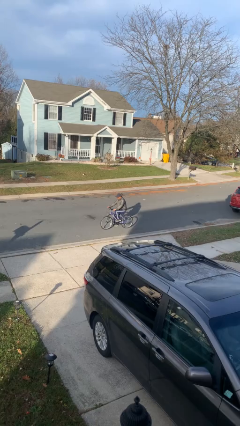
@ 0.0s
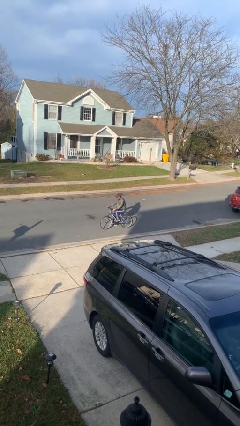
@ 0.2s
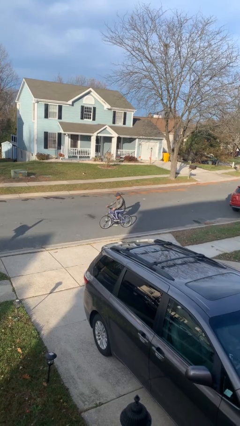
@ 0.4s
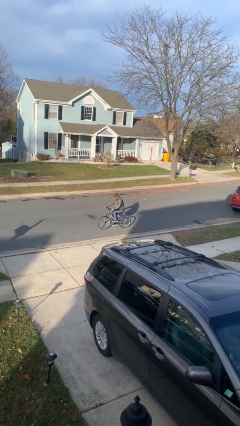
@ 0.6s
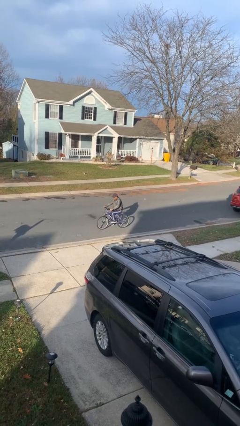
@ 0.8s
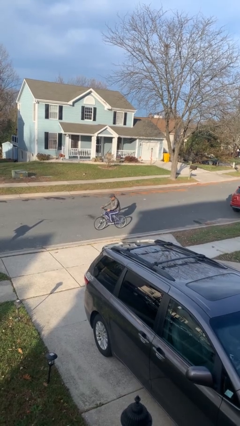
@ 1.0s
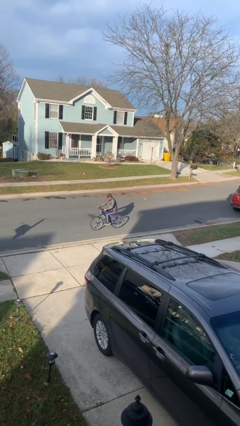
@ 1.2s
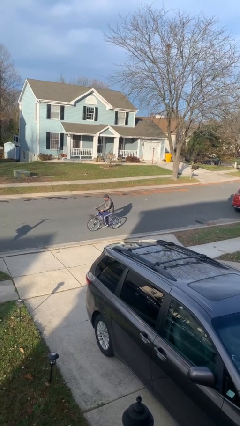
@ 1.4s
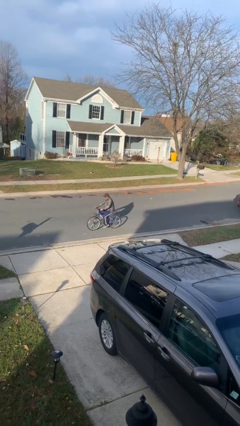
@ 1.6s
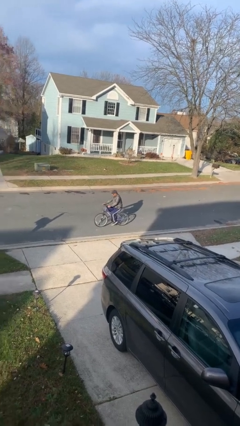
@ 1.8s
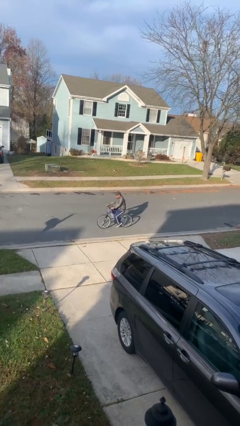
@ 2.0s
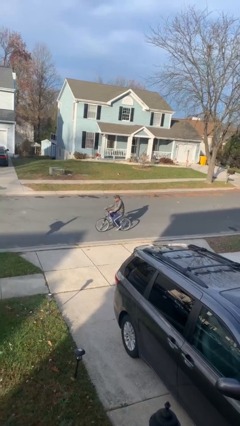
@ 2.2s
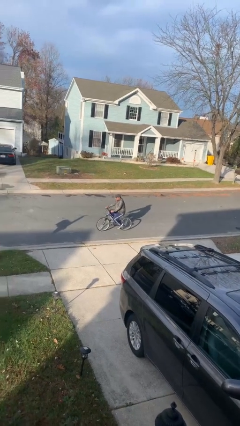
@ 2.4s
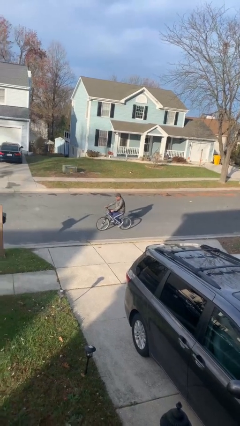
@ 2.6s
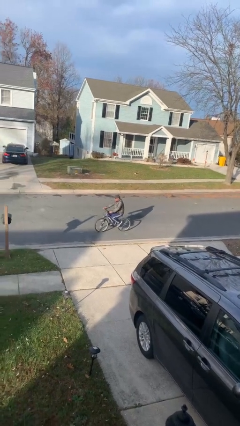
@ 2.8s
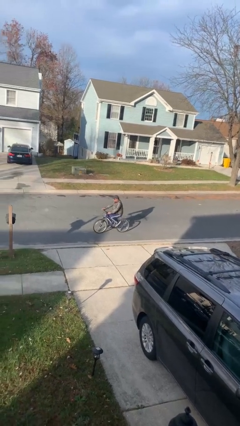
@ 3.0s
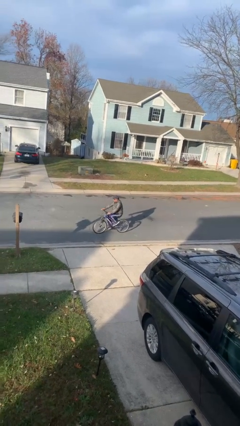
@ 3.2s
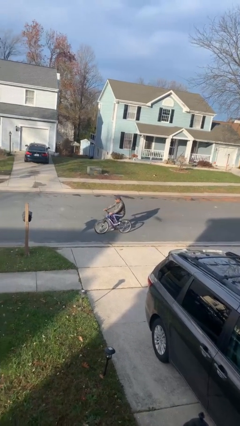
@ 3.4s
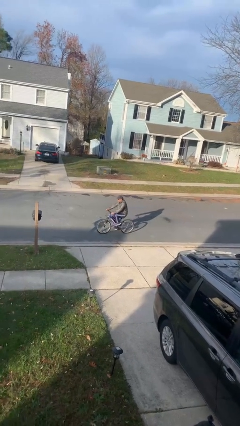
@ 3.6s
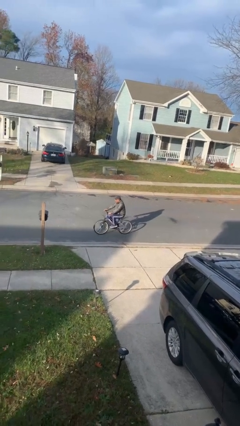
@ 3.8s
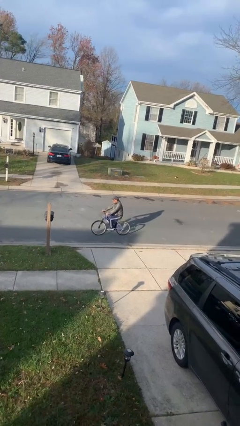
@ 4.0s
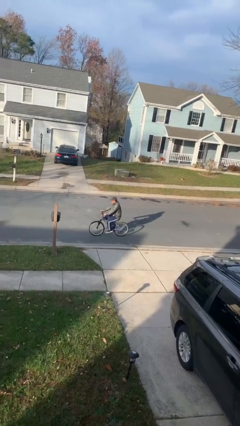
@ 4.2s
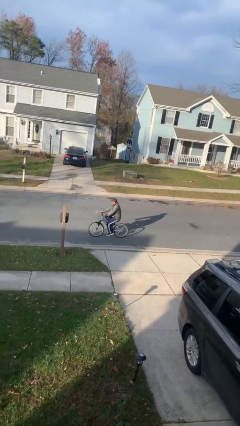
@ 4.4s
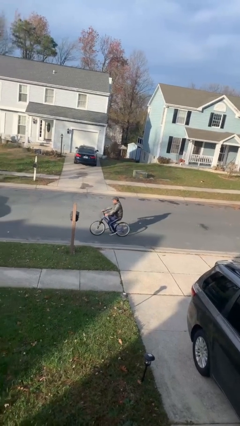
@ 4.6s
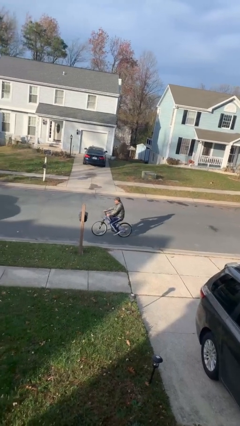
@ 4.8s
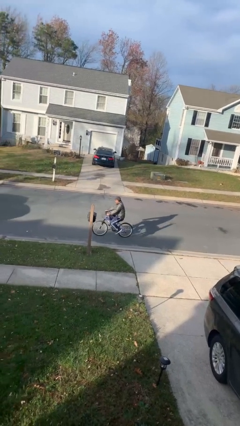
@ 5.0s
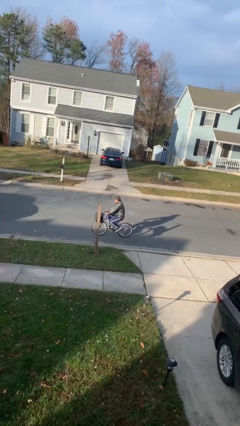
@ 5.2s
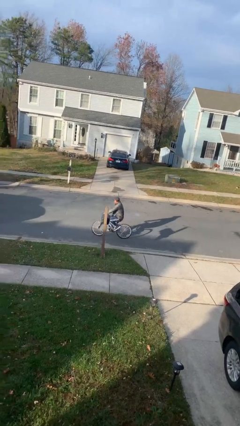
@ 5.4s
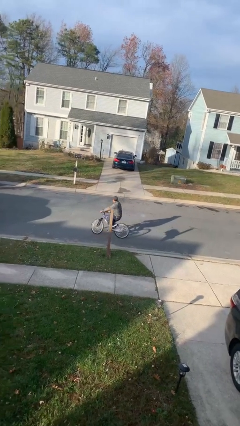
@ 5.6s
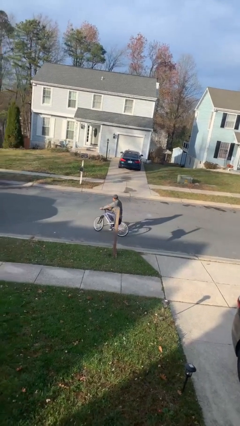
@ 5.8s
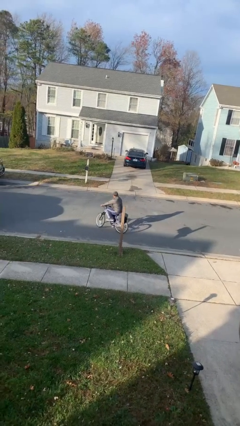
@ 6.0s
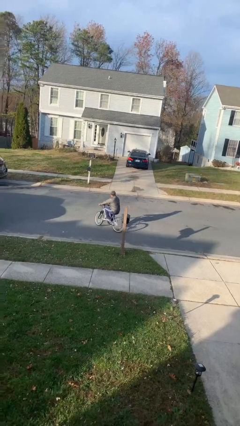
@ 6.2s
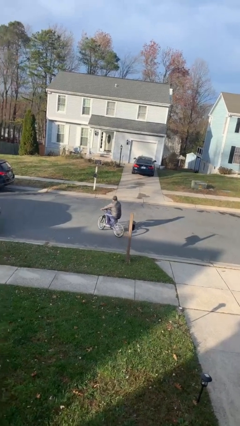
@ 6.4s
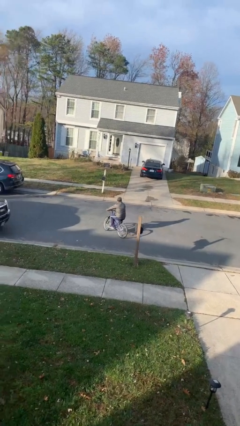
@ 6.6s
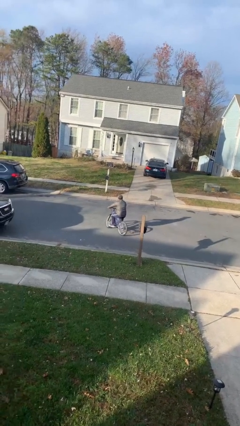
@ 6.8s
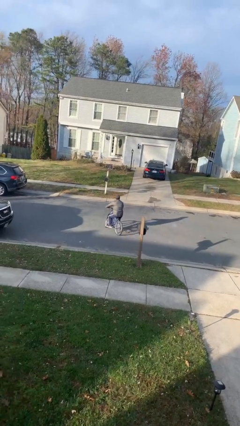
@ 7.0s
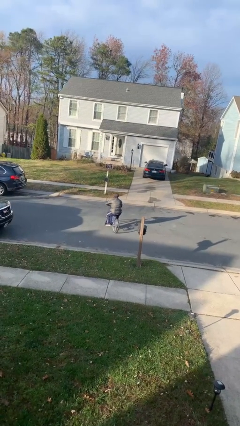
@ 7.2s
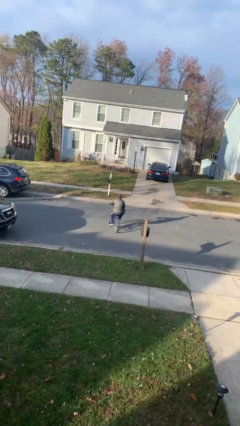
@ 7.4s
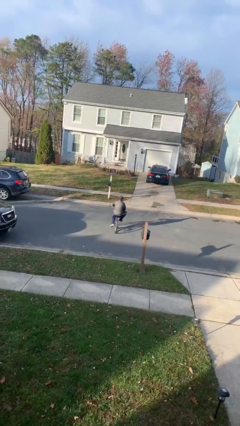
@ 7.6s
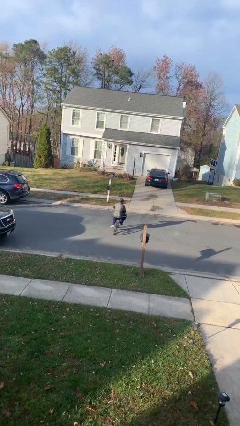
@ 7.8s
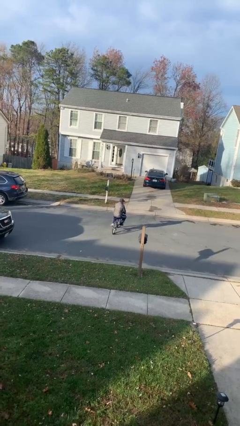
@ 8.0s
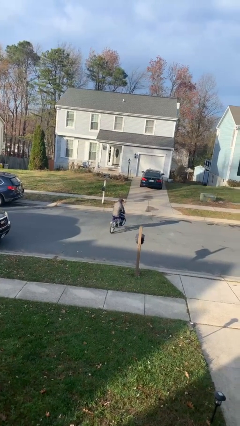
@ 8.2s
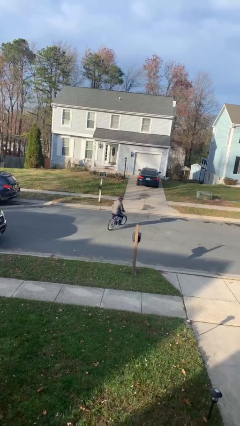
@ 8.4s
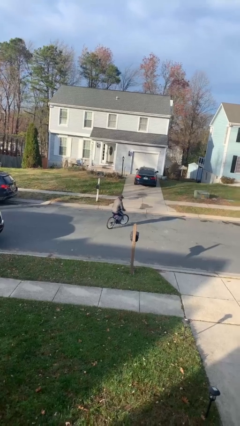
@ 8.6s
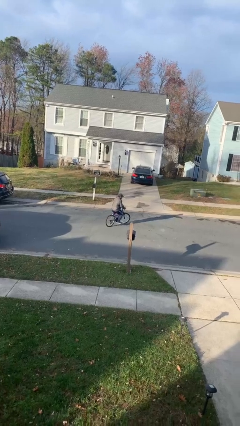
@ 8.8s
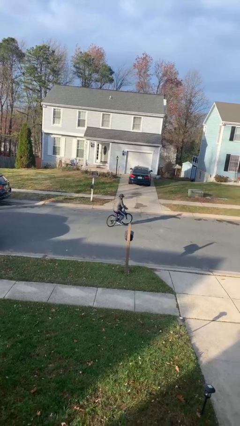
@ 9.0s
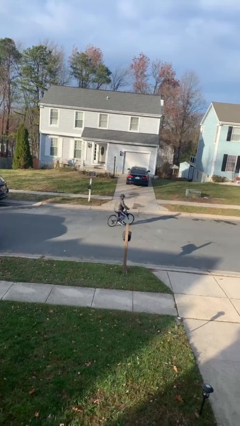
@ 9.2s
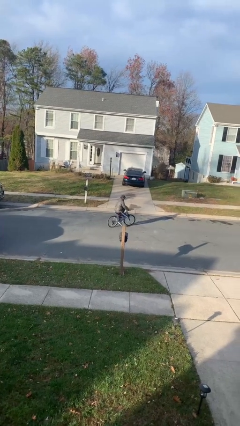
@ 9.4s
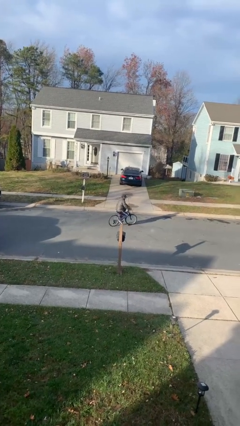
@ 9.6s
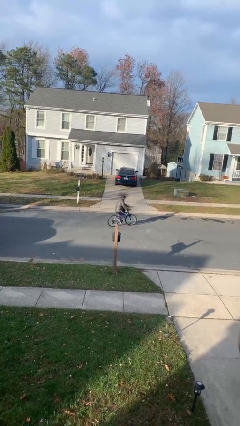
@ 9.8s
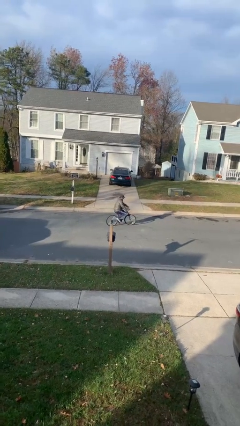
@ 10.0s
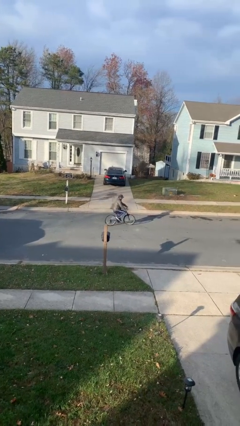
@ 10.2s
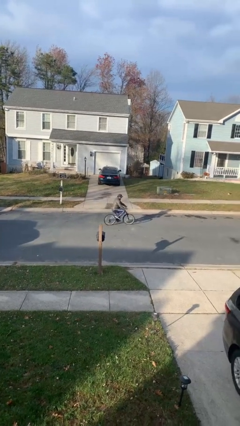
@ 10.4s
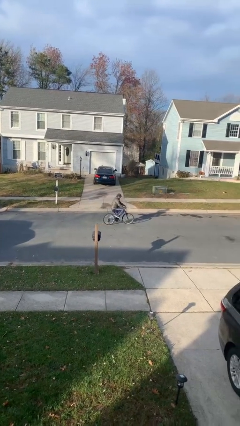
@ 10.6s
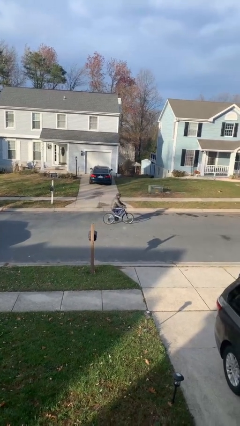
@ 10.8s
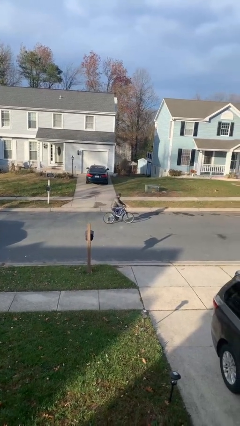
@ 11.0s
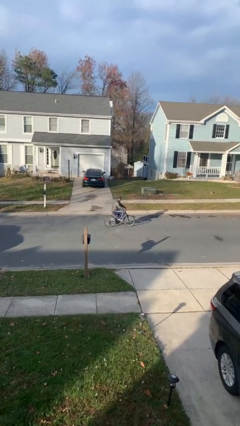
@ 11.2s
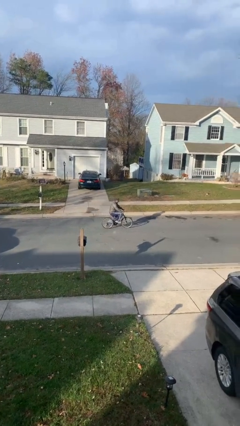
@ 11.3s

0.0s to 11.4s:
person rides bicycle

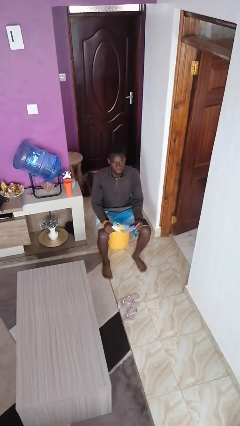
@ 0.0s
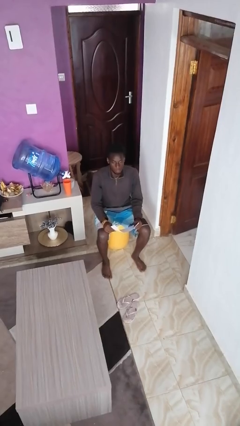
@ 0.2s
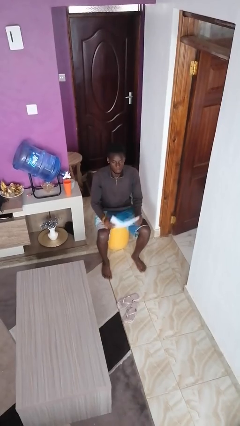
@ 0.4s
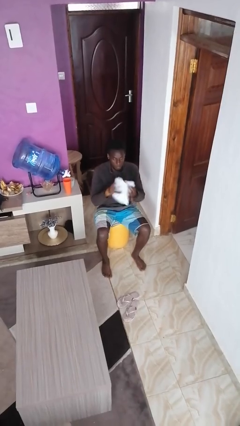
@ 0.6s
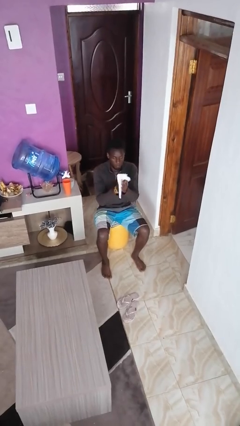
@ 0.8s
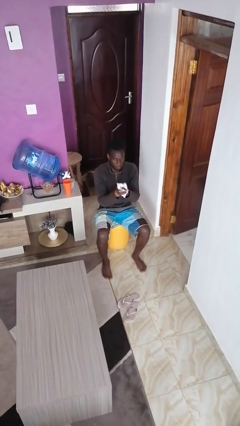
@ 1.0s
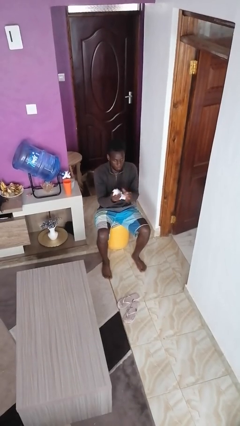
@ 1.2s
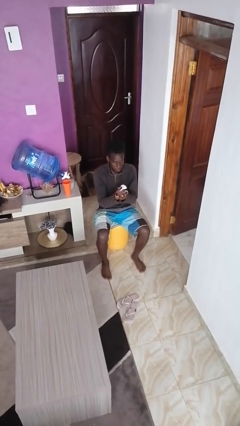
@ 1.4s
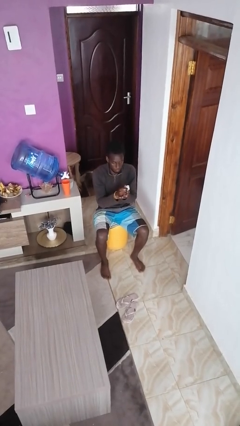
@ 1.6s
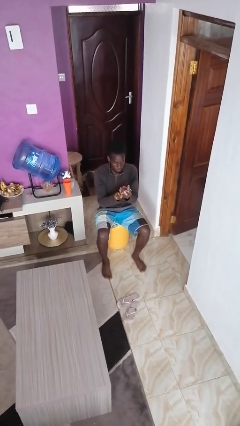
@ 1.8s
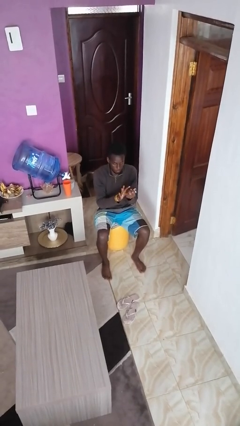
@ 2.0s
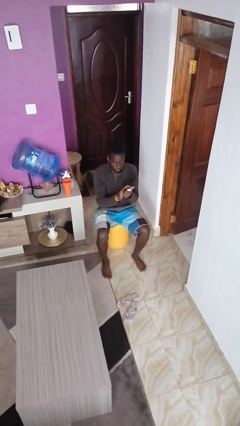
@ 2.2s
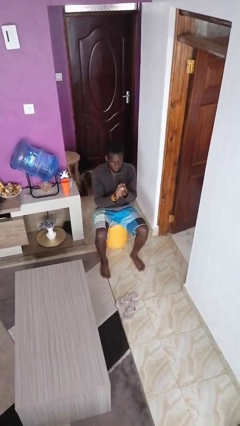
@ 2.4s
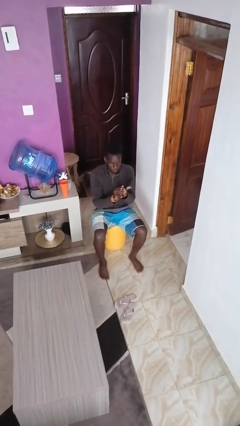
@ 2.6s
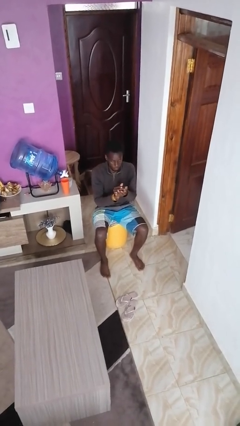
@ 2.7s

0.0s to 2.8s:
person crumples paper

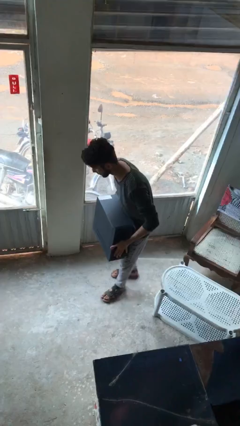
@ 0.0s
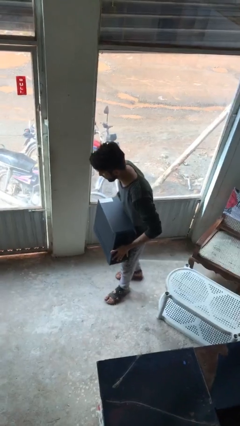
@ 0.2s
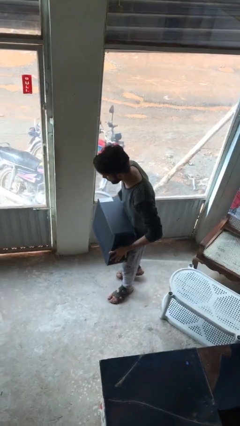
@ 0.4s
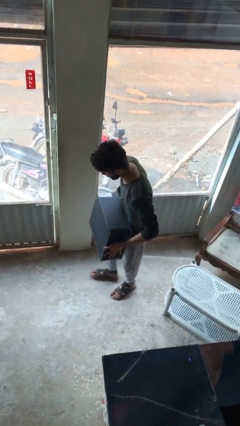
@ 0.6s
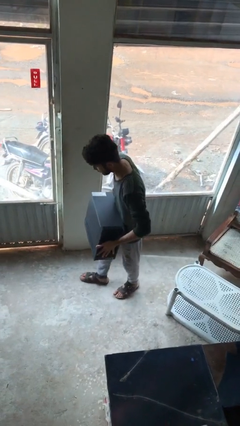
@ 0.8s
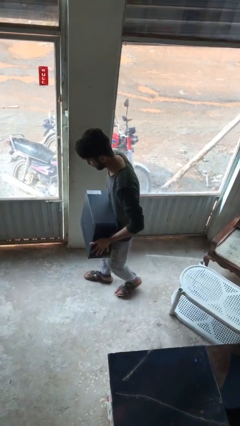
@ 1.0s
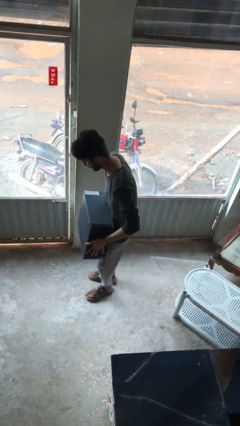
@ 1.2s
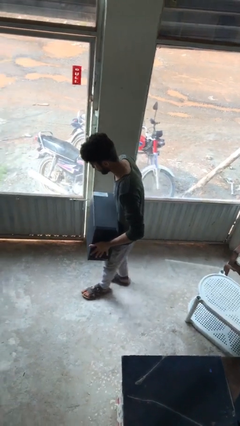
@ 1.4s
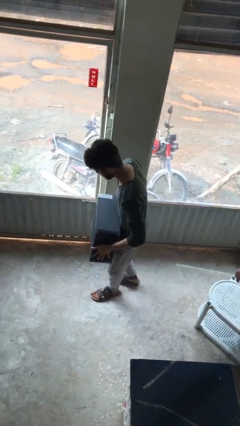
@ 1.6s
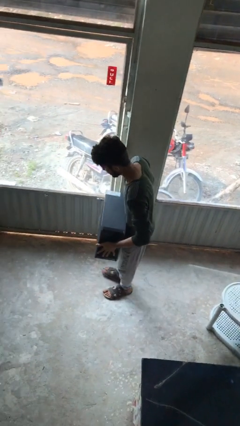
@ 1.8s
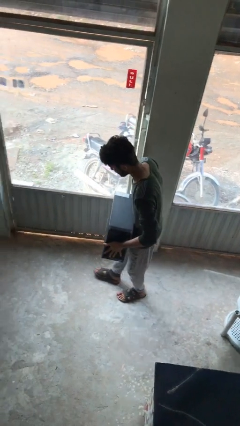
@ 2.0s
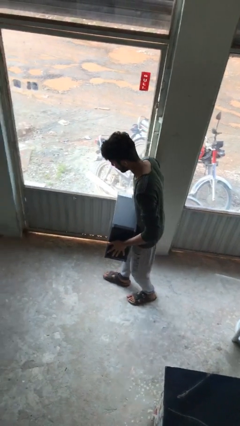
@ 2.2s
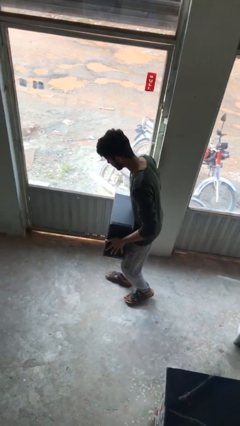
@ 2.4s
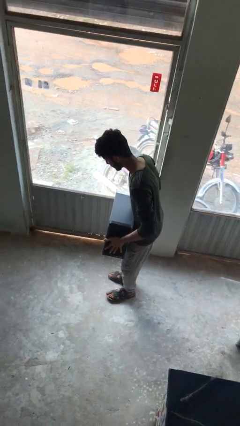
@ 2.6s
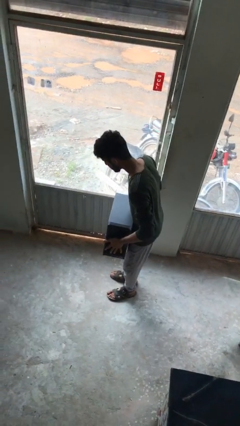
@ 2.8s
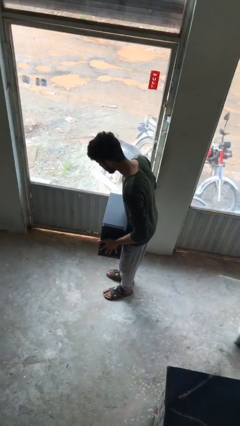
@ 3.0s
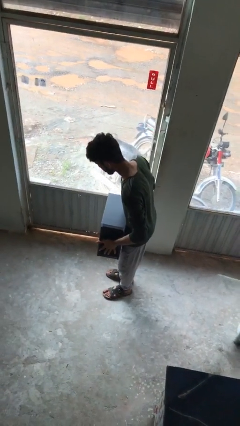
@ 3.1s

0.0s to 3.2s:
person carries heavy object

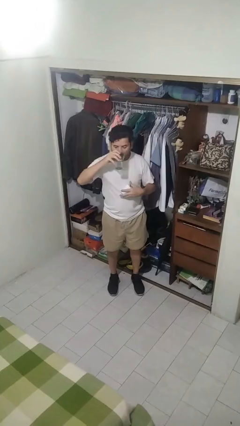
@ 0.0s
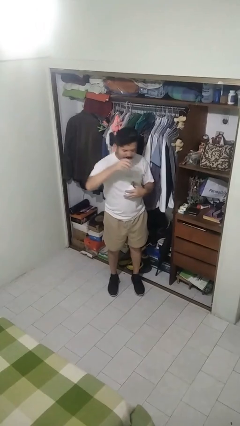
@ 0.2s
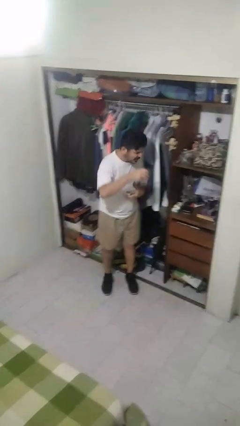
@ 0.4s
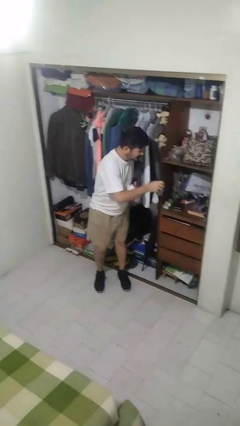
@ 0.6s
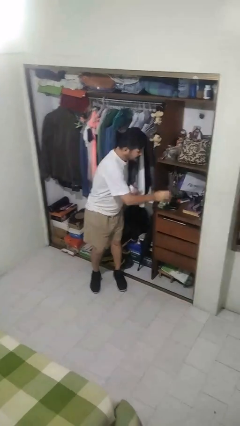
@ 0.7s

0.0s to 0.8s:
person drinks from cup
